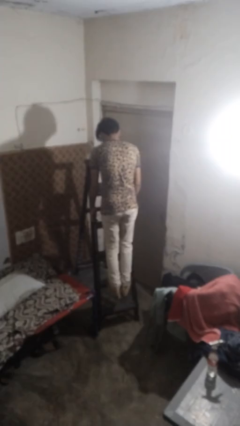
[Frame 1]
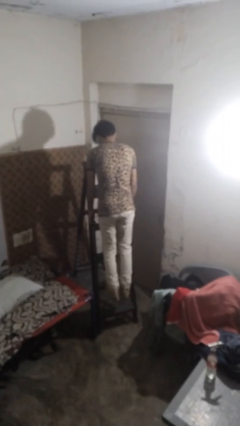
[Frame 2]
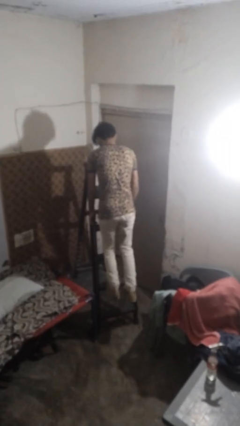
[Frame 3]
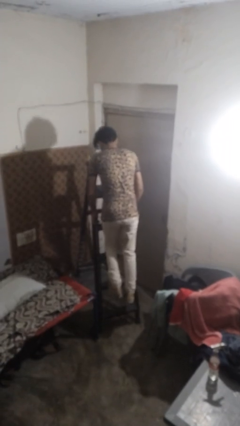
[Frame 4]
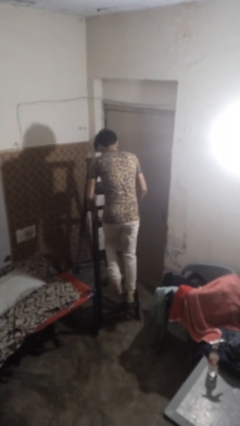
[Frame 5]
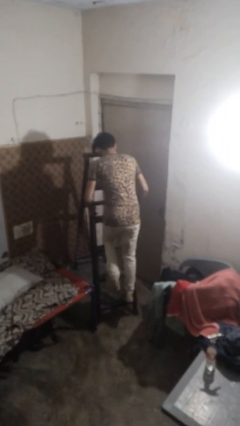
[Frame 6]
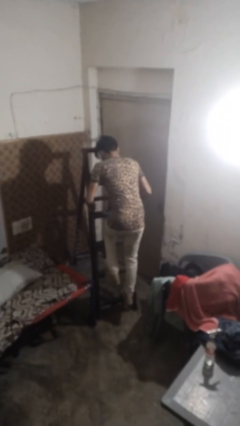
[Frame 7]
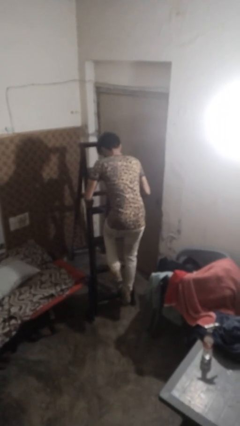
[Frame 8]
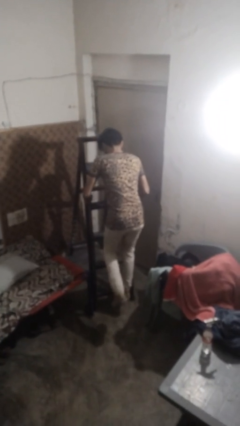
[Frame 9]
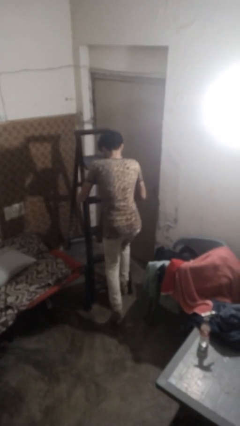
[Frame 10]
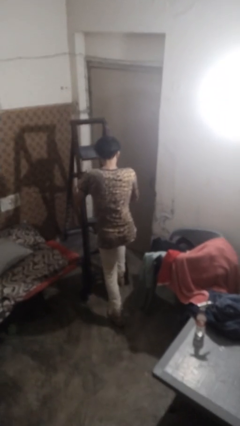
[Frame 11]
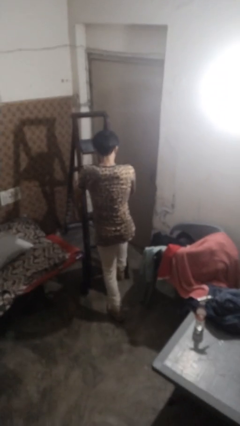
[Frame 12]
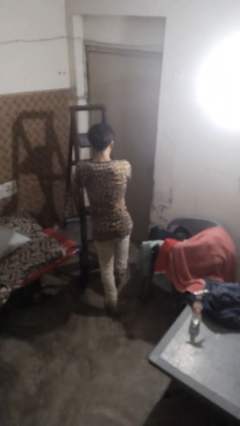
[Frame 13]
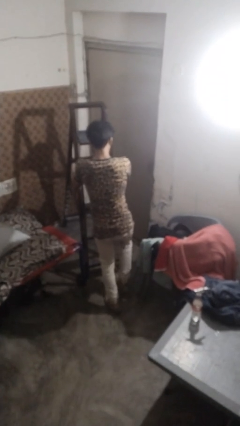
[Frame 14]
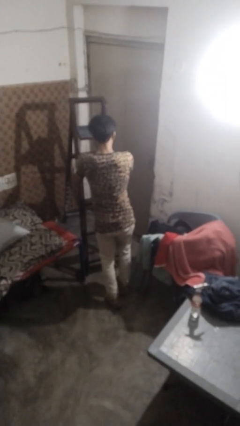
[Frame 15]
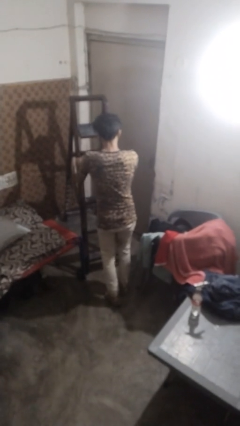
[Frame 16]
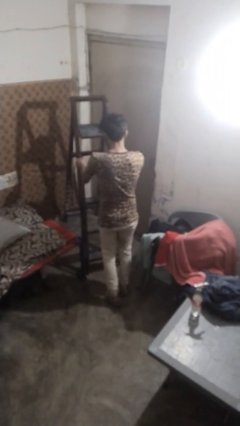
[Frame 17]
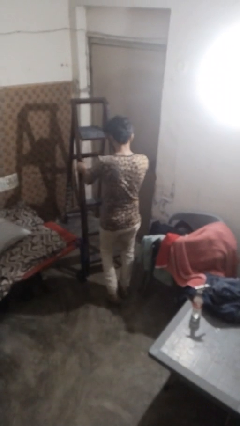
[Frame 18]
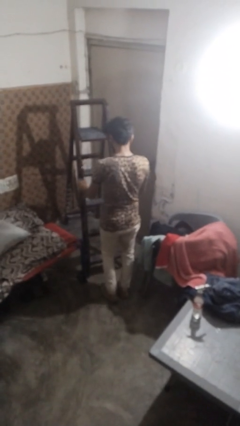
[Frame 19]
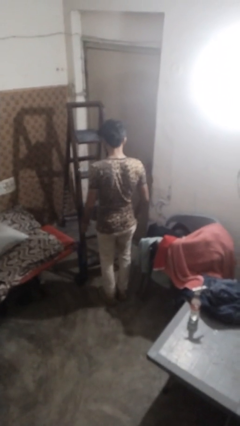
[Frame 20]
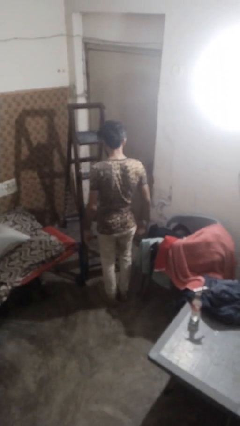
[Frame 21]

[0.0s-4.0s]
person climbs down ladder

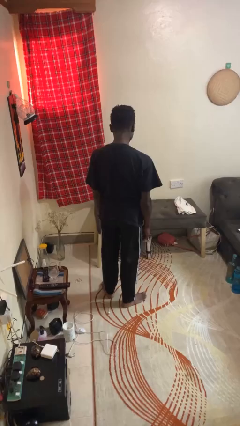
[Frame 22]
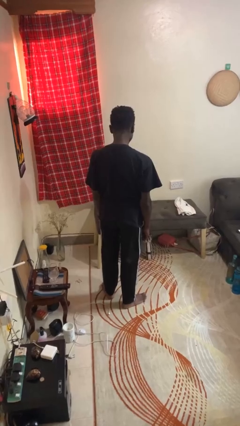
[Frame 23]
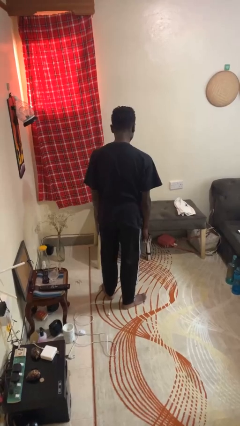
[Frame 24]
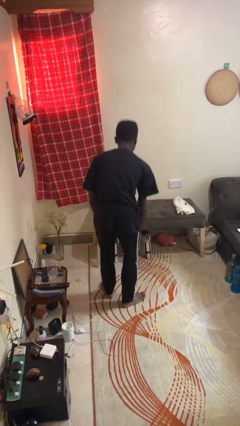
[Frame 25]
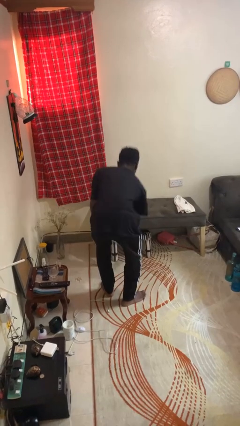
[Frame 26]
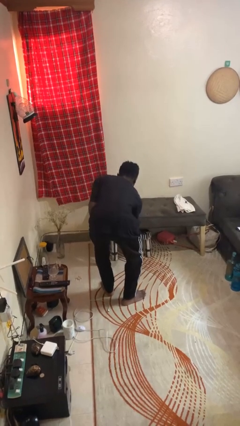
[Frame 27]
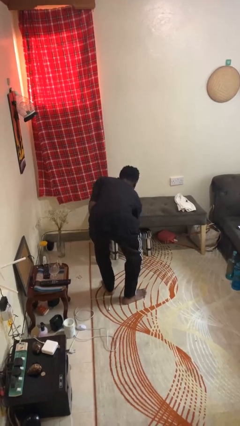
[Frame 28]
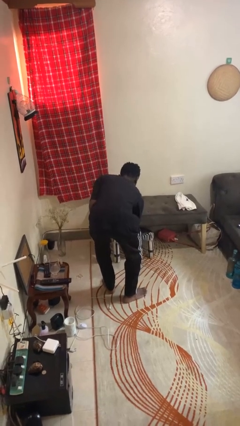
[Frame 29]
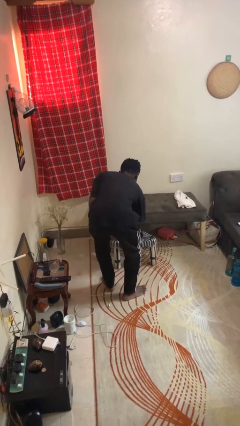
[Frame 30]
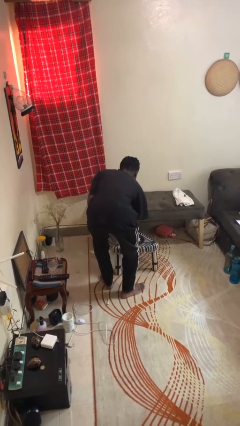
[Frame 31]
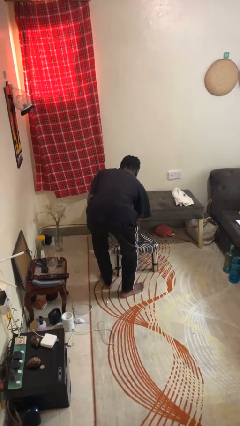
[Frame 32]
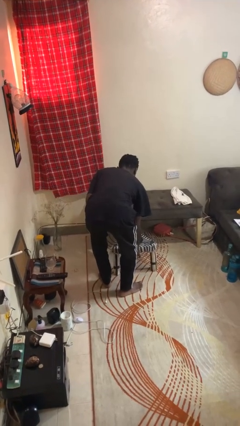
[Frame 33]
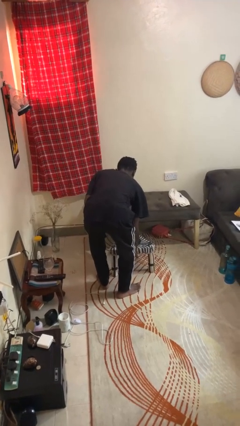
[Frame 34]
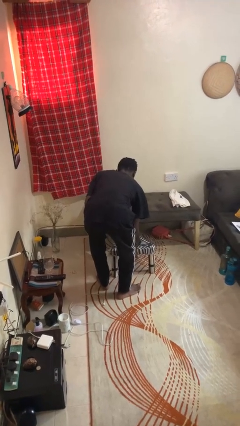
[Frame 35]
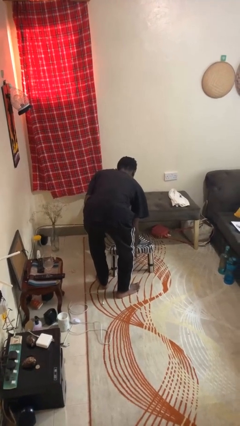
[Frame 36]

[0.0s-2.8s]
person pulls out chair

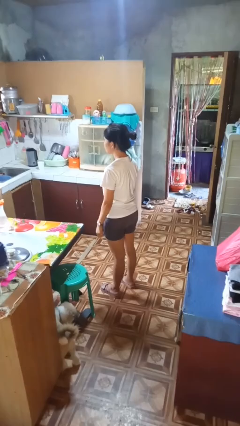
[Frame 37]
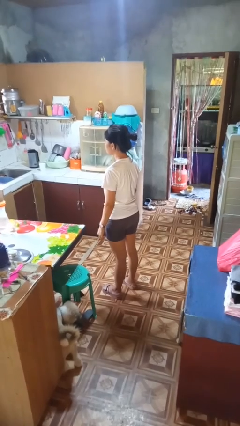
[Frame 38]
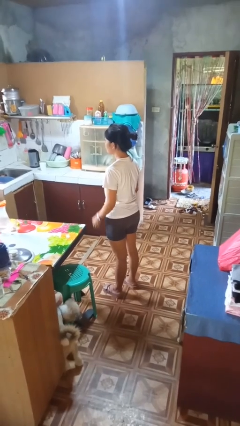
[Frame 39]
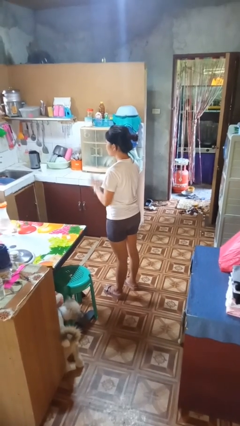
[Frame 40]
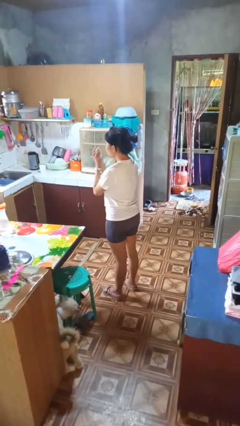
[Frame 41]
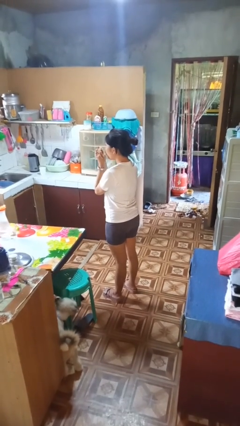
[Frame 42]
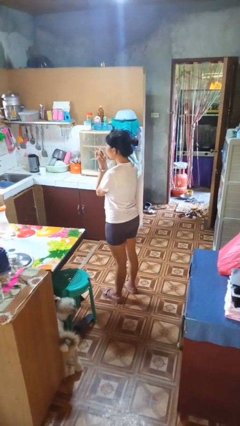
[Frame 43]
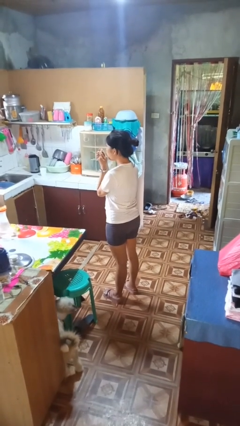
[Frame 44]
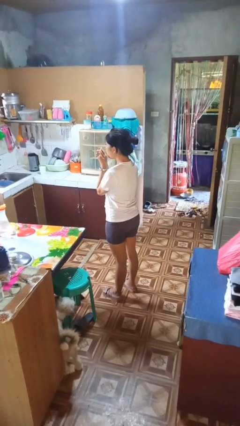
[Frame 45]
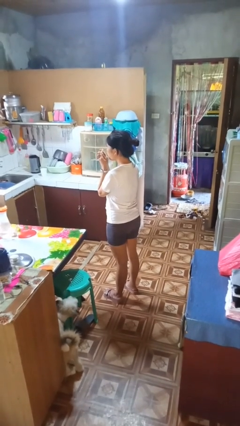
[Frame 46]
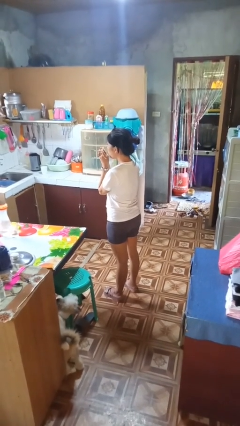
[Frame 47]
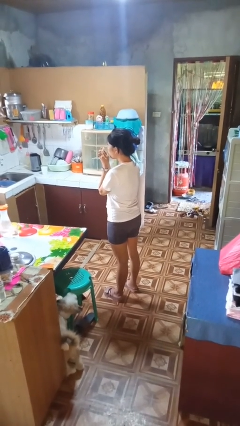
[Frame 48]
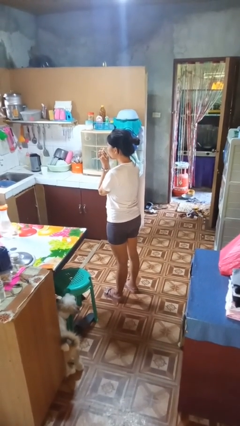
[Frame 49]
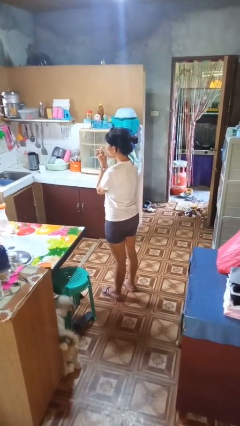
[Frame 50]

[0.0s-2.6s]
person blows into hands

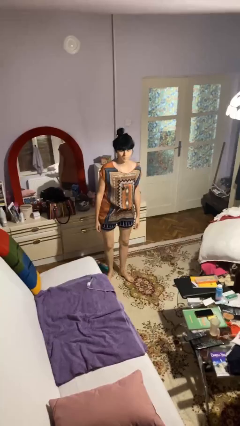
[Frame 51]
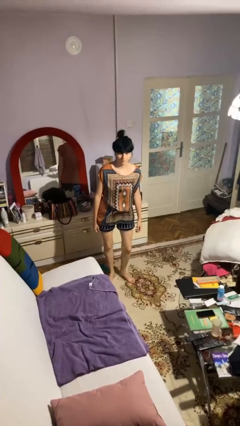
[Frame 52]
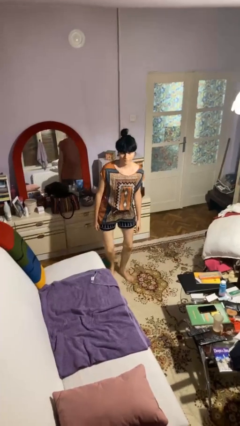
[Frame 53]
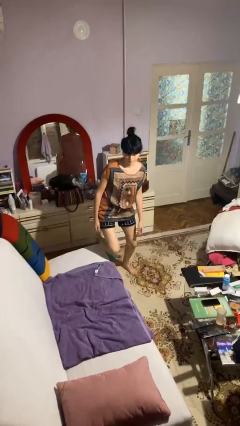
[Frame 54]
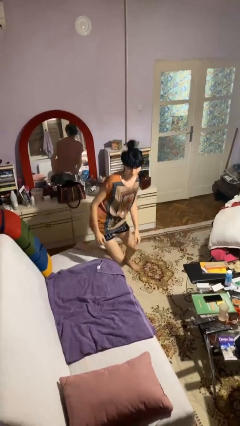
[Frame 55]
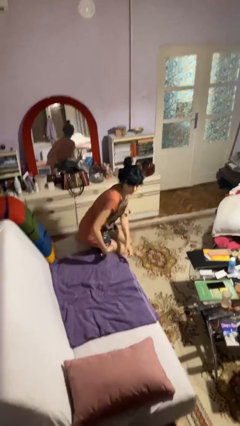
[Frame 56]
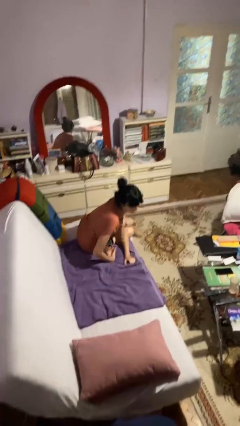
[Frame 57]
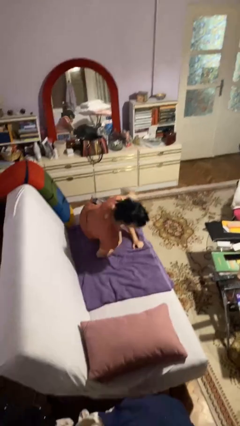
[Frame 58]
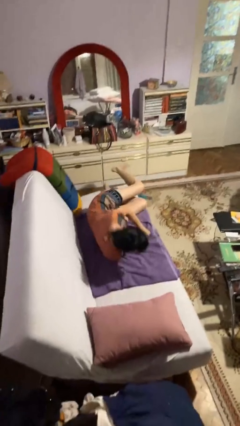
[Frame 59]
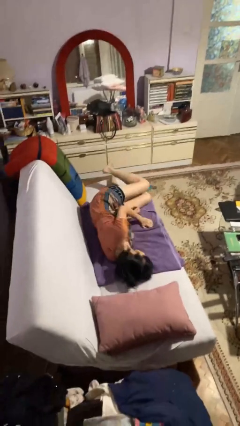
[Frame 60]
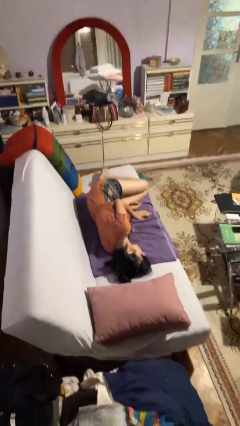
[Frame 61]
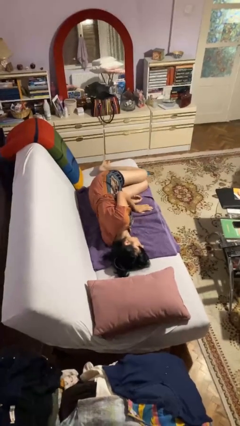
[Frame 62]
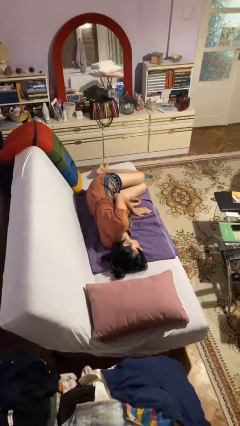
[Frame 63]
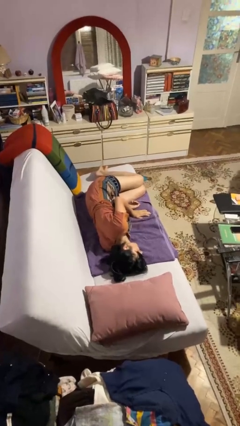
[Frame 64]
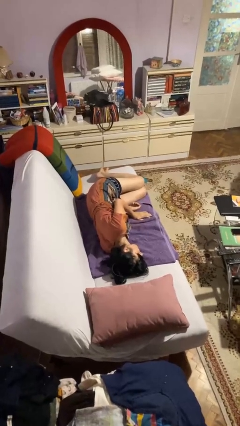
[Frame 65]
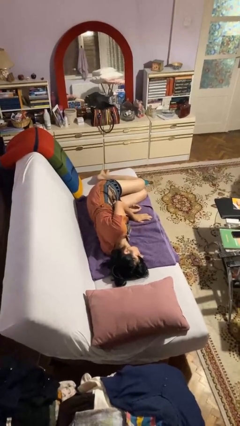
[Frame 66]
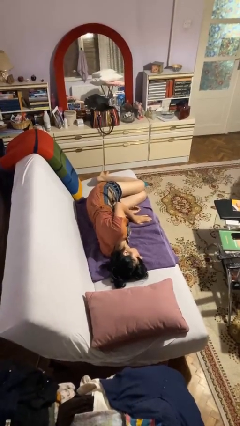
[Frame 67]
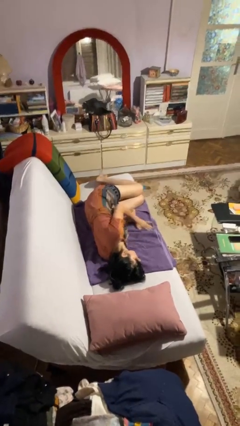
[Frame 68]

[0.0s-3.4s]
person lies down on couch

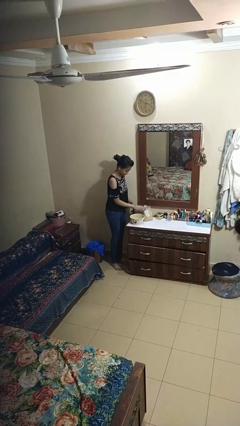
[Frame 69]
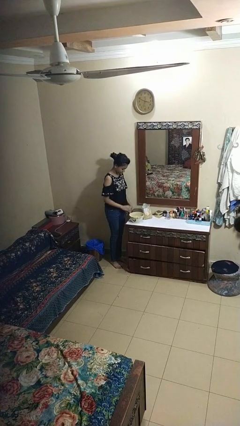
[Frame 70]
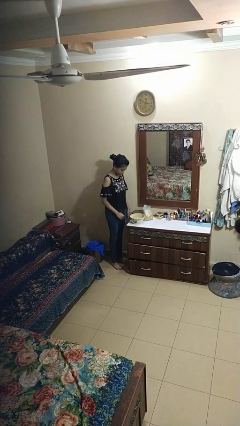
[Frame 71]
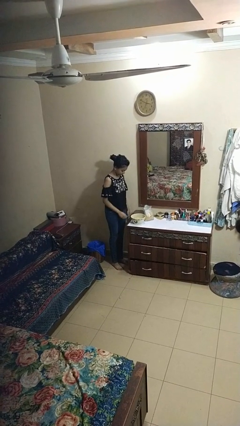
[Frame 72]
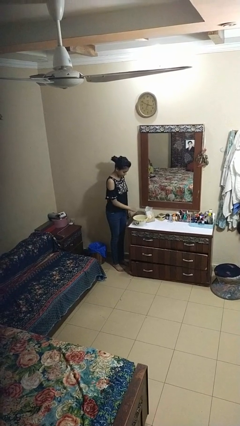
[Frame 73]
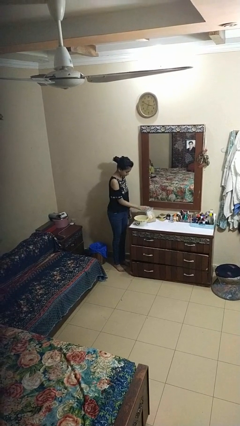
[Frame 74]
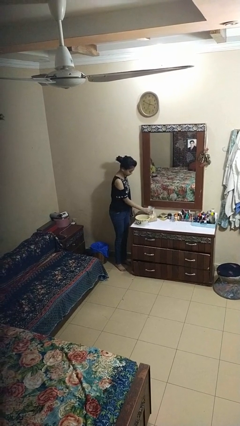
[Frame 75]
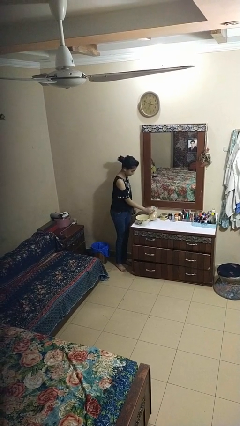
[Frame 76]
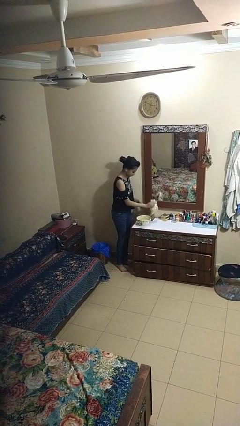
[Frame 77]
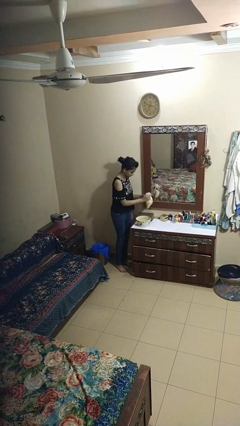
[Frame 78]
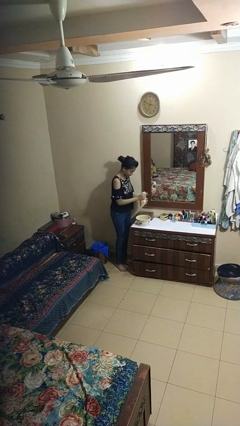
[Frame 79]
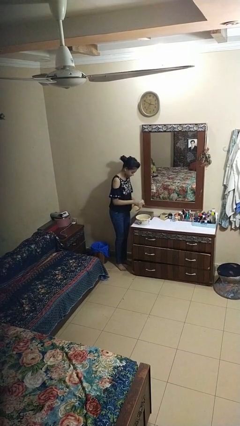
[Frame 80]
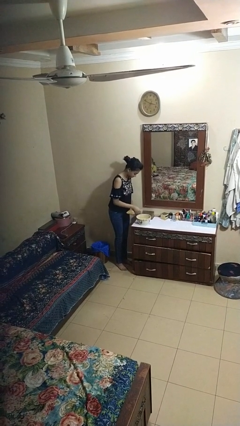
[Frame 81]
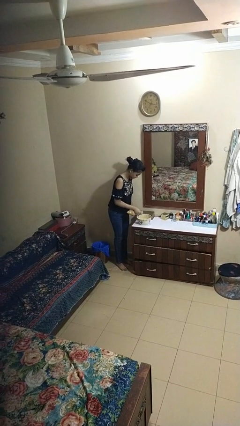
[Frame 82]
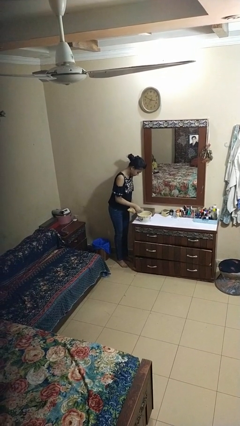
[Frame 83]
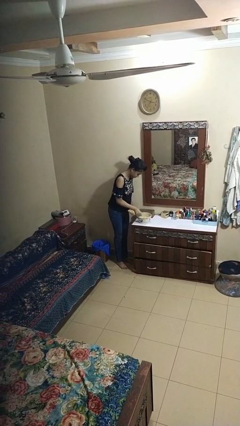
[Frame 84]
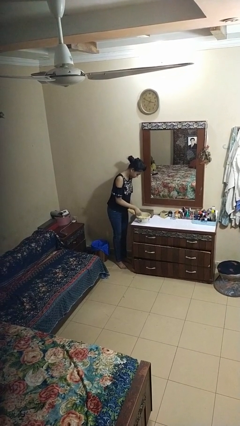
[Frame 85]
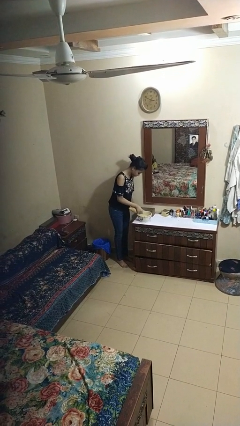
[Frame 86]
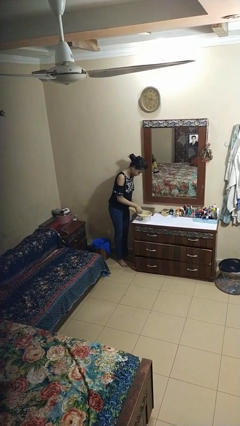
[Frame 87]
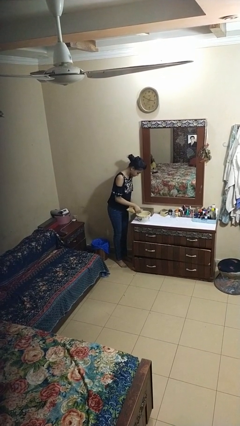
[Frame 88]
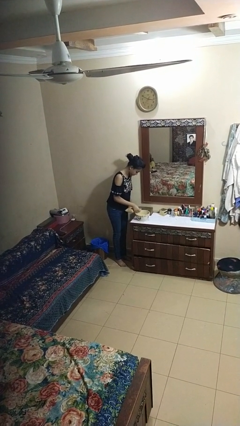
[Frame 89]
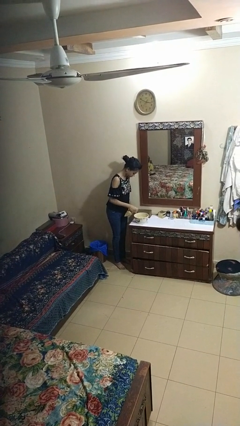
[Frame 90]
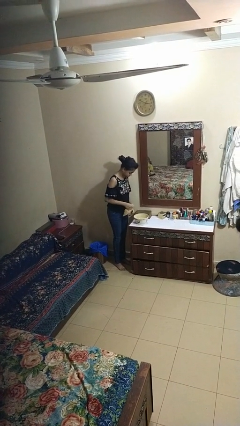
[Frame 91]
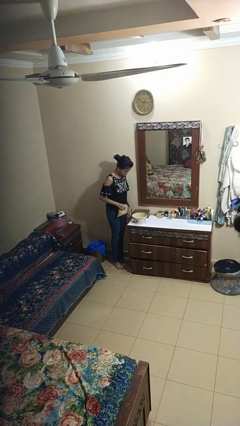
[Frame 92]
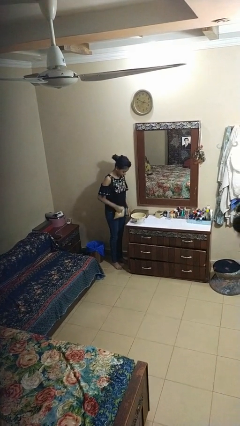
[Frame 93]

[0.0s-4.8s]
person pours into bowl
